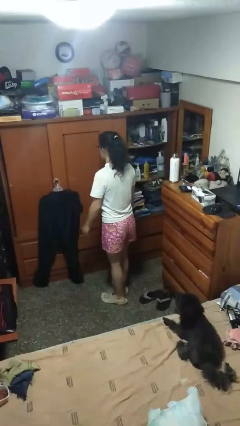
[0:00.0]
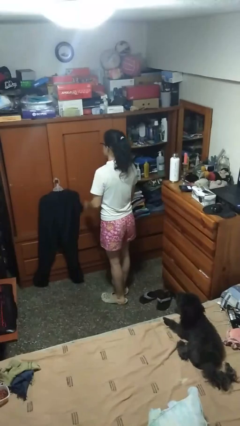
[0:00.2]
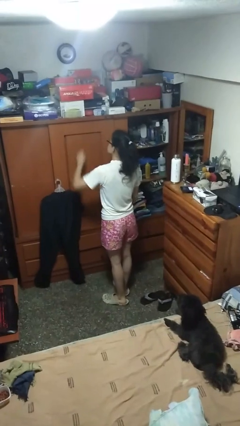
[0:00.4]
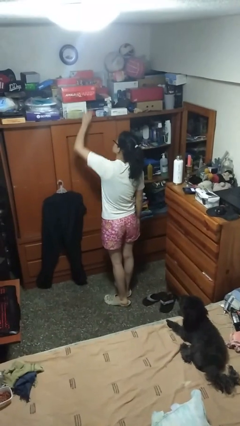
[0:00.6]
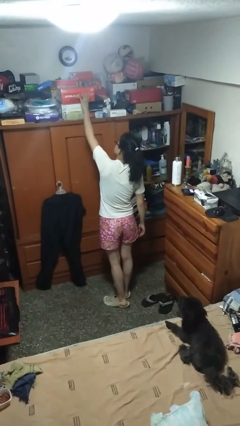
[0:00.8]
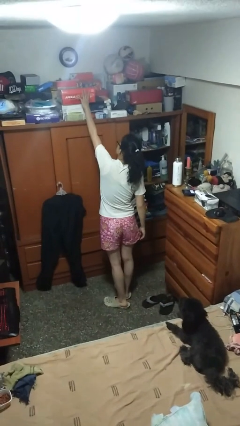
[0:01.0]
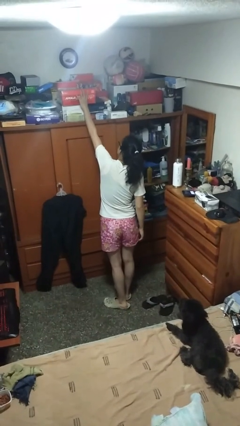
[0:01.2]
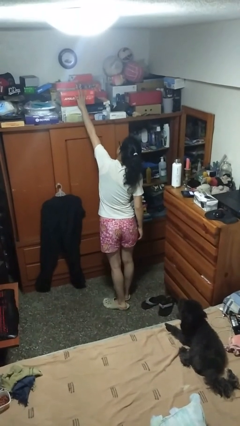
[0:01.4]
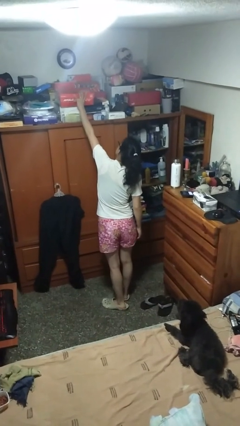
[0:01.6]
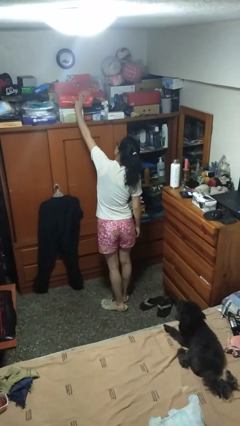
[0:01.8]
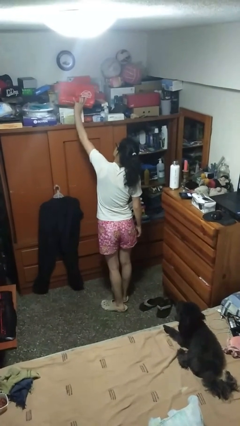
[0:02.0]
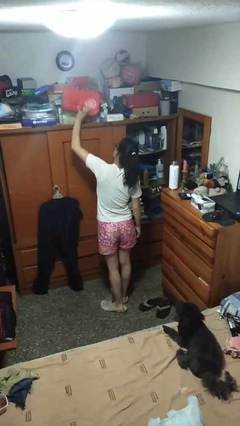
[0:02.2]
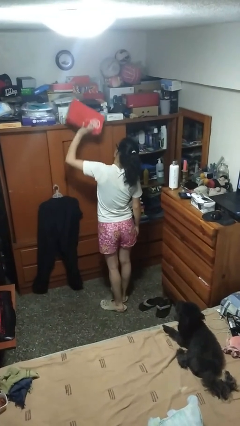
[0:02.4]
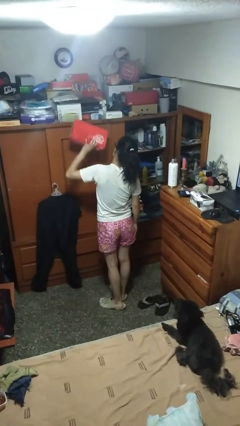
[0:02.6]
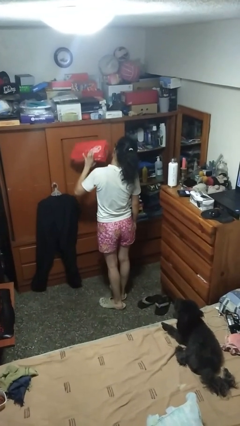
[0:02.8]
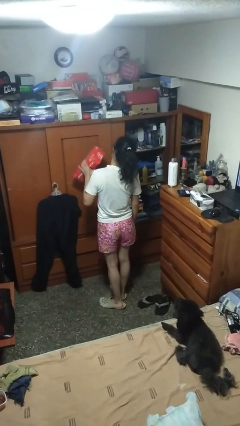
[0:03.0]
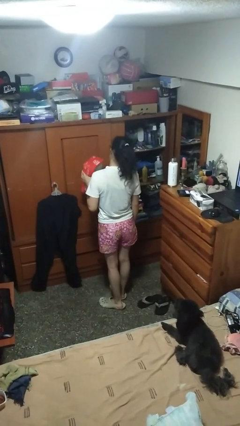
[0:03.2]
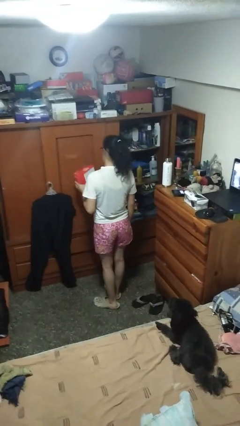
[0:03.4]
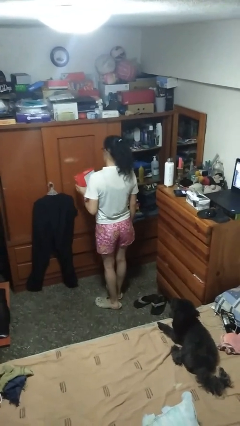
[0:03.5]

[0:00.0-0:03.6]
person picks up object from shelf

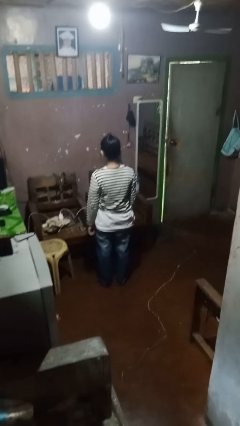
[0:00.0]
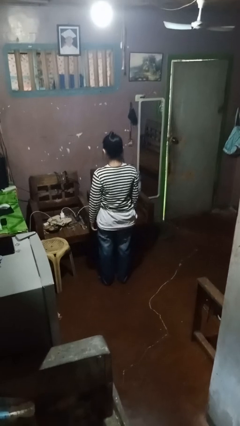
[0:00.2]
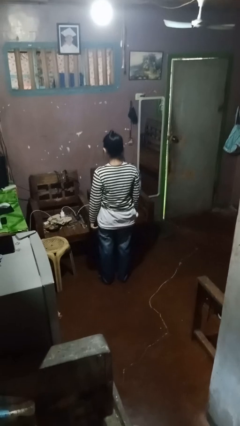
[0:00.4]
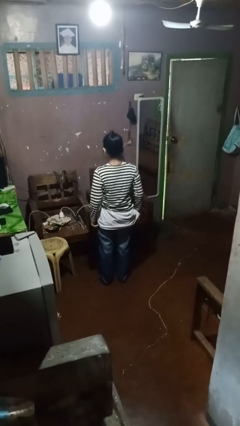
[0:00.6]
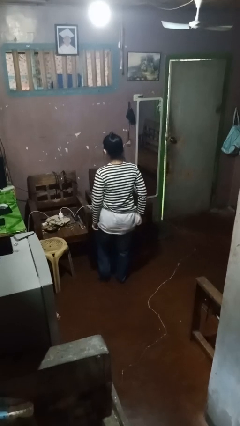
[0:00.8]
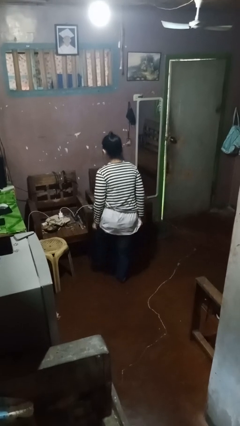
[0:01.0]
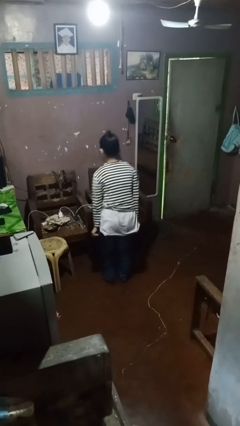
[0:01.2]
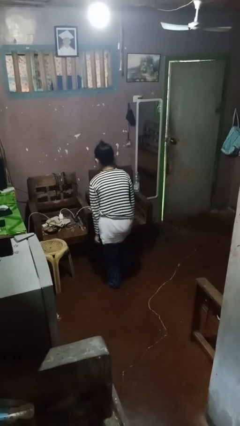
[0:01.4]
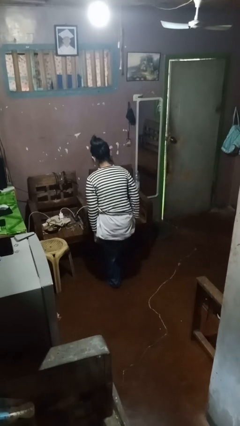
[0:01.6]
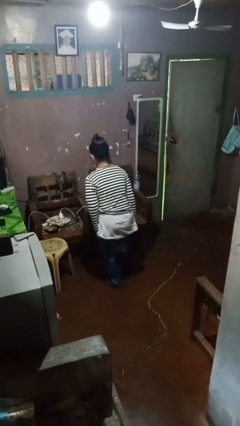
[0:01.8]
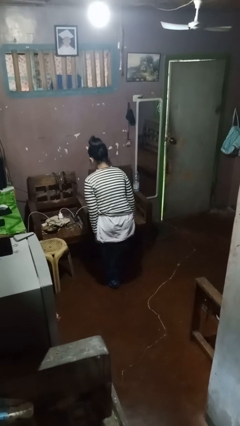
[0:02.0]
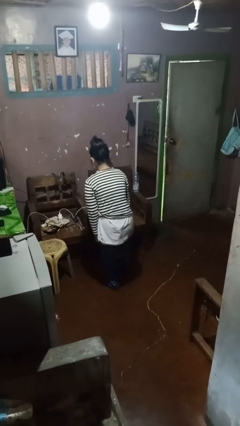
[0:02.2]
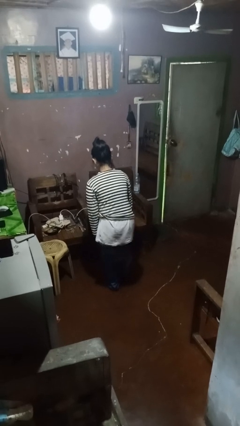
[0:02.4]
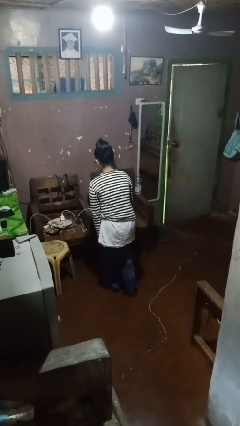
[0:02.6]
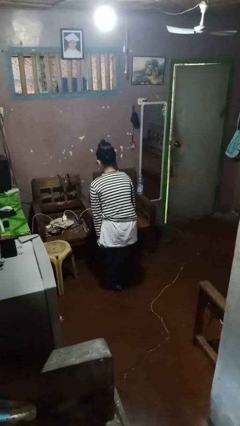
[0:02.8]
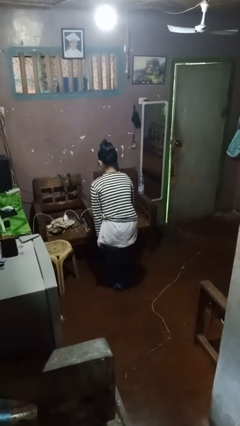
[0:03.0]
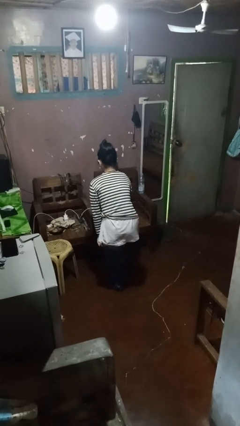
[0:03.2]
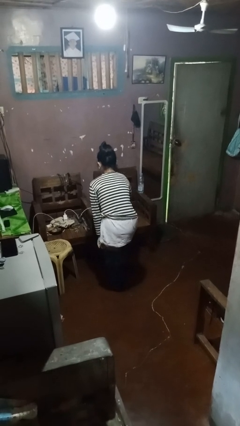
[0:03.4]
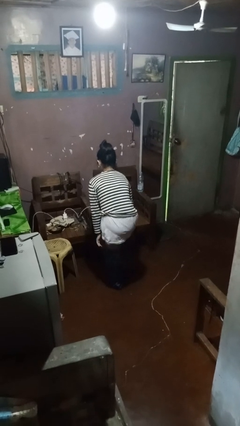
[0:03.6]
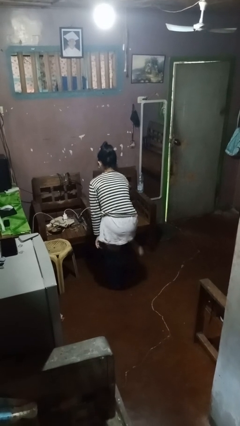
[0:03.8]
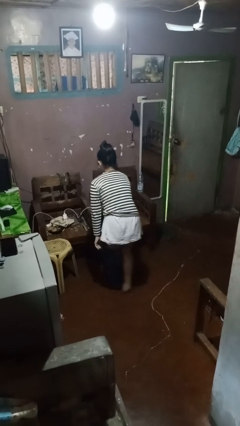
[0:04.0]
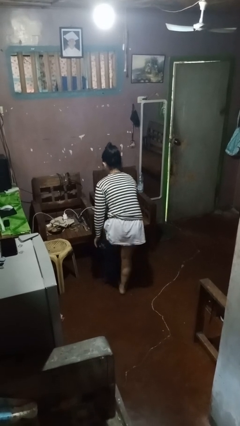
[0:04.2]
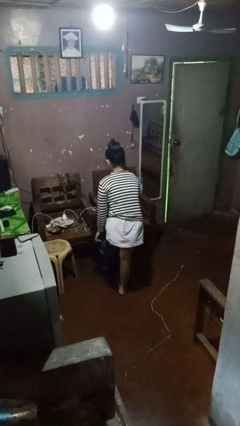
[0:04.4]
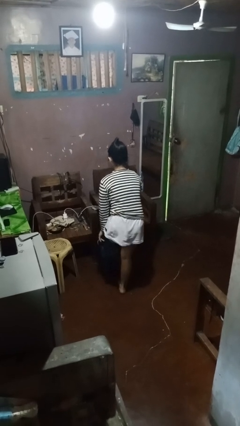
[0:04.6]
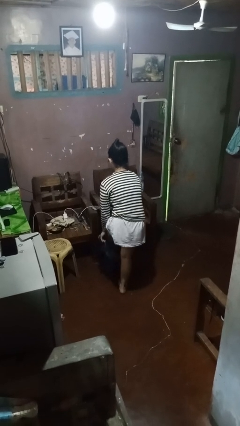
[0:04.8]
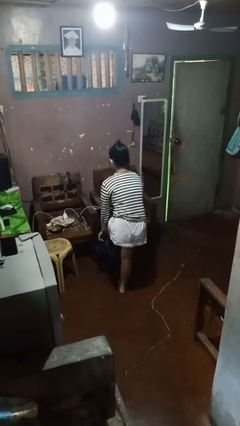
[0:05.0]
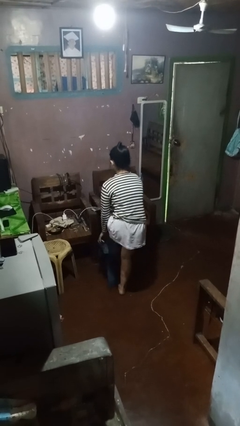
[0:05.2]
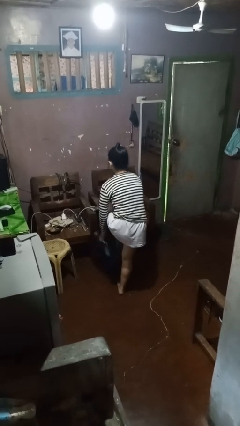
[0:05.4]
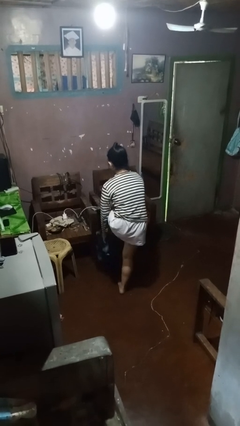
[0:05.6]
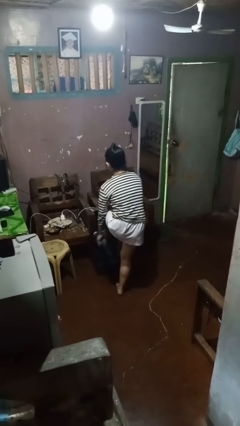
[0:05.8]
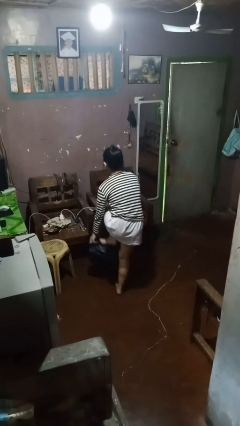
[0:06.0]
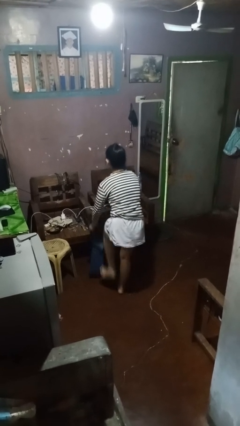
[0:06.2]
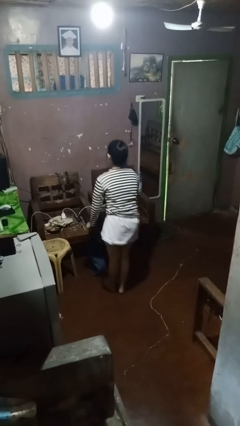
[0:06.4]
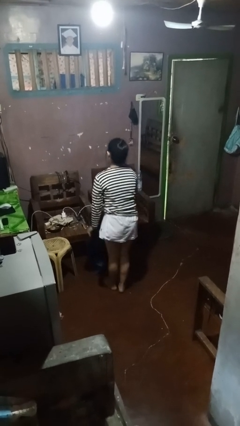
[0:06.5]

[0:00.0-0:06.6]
person takes off pants

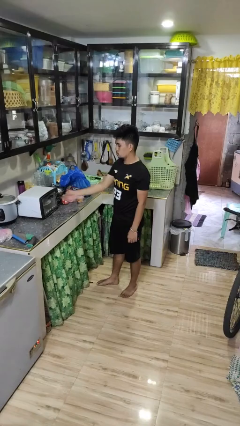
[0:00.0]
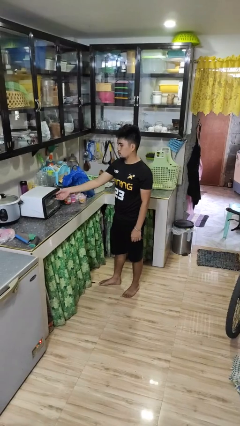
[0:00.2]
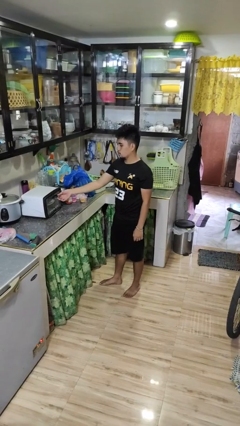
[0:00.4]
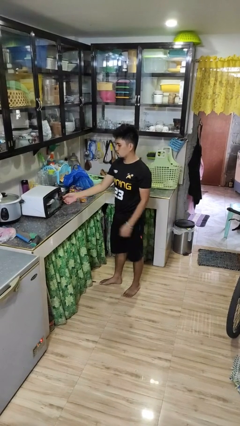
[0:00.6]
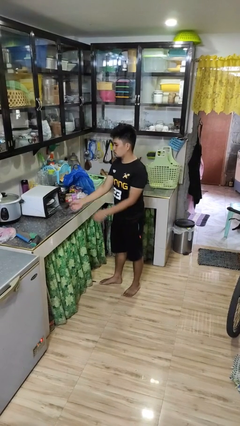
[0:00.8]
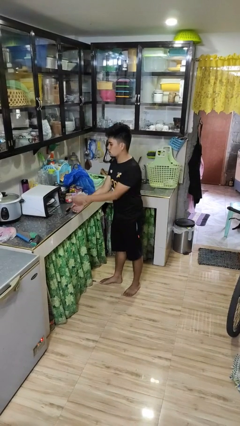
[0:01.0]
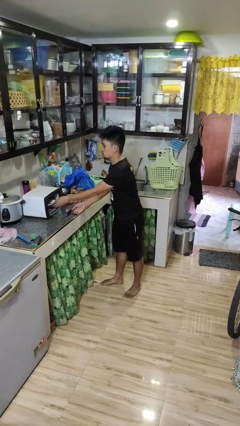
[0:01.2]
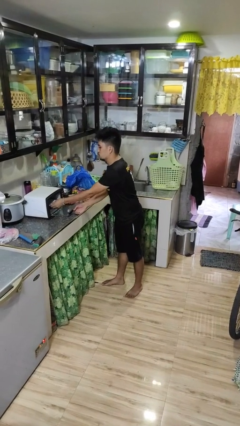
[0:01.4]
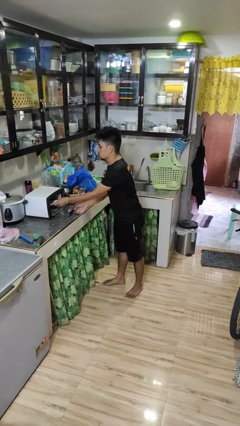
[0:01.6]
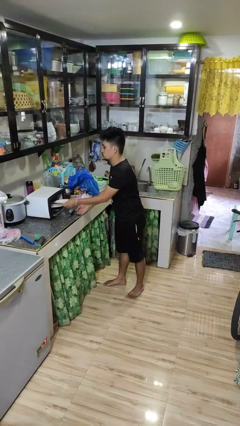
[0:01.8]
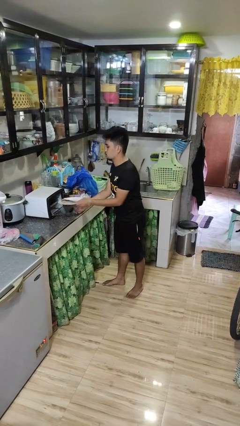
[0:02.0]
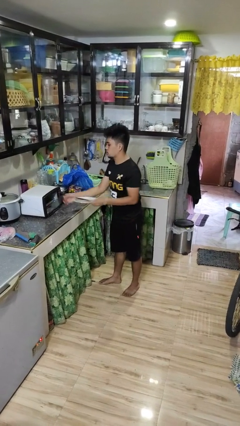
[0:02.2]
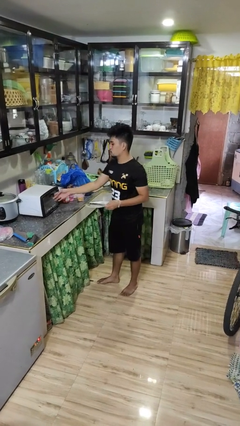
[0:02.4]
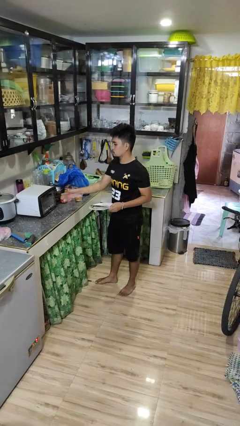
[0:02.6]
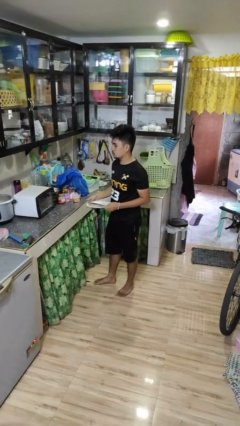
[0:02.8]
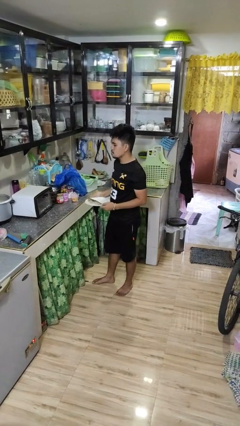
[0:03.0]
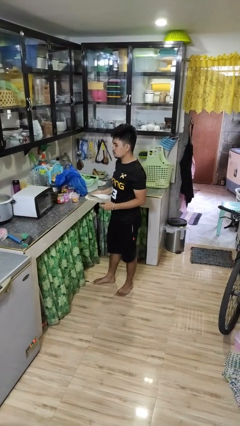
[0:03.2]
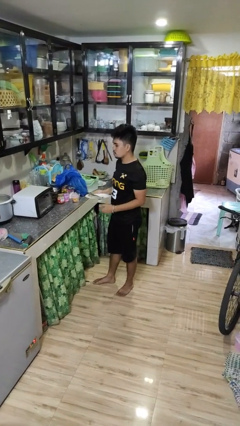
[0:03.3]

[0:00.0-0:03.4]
person takes object from microwave

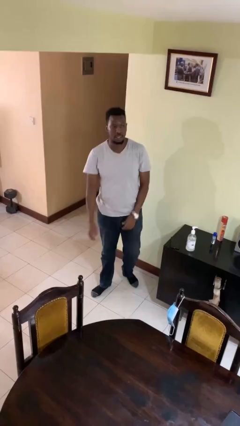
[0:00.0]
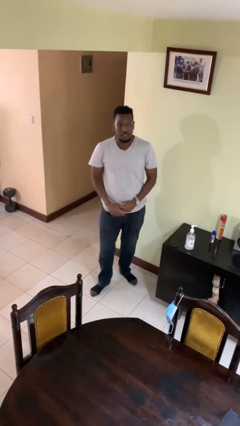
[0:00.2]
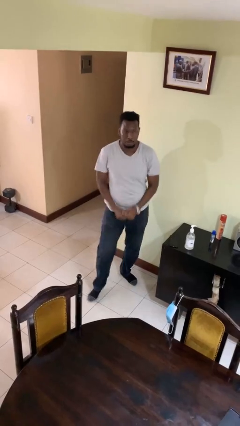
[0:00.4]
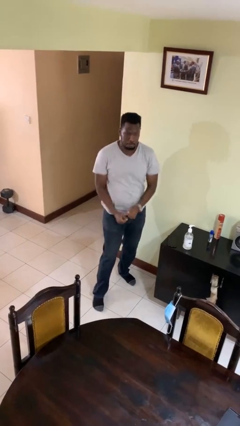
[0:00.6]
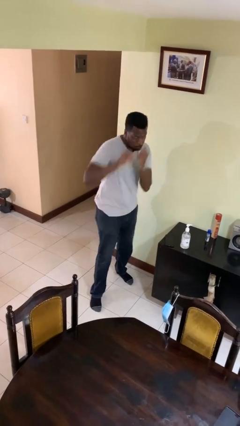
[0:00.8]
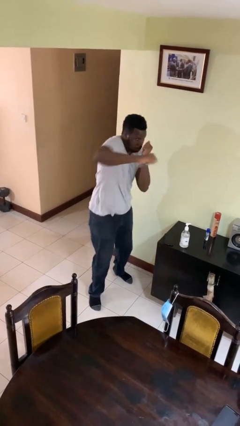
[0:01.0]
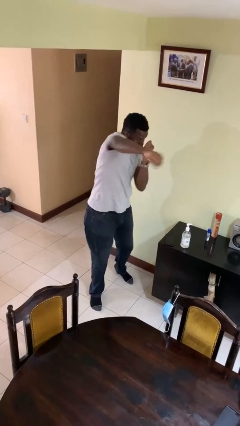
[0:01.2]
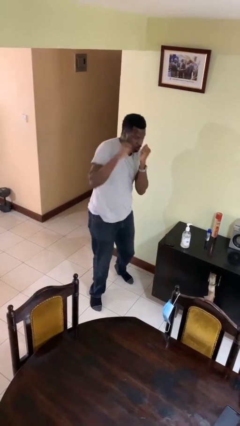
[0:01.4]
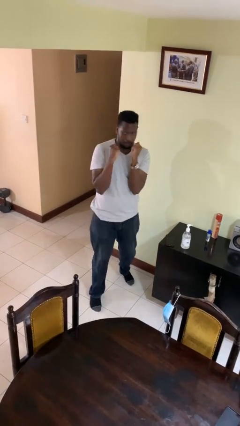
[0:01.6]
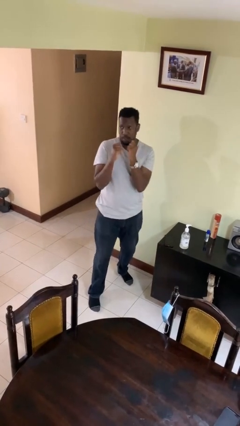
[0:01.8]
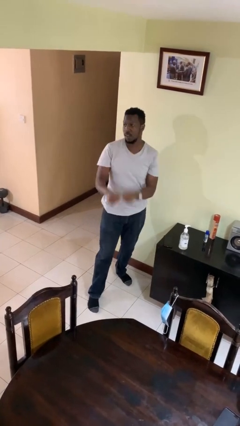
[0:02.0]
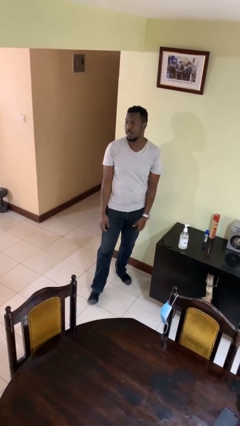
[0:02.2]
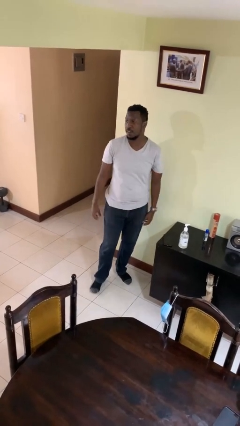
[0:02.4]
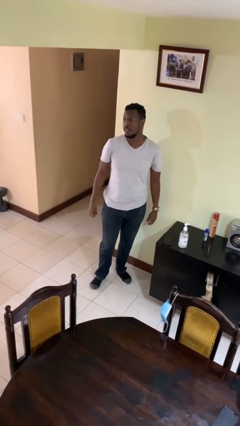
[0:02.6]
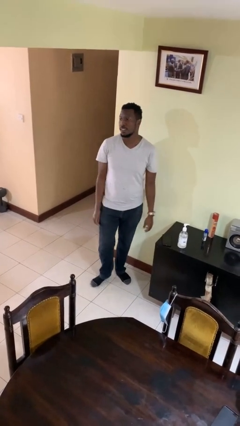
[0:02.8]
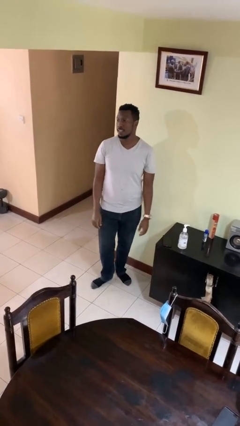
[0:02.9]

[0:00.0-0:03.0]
person punches

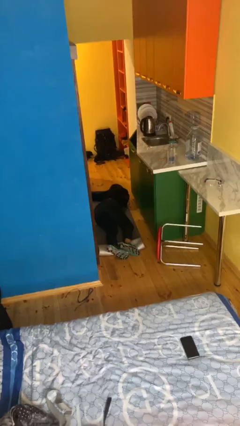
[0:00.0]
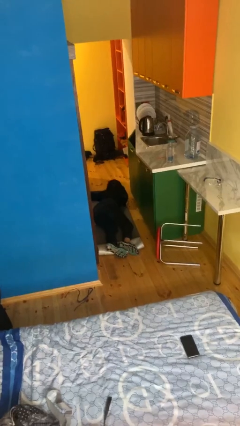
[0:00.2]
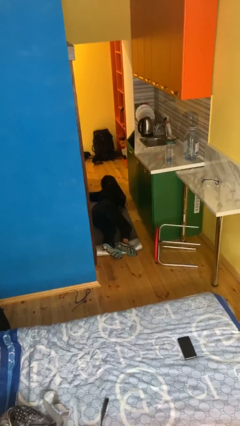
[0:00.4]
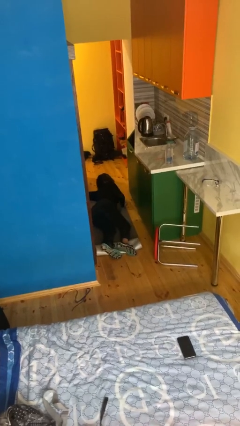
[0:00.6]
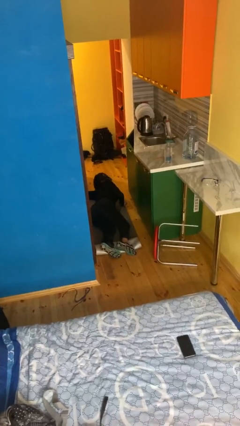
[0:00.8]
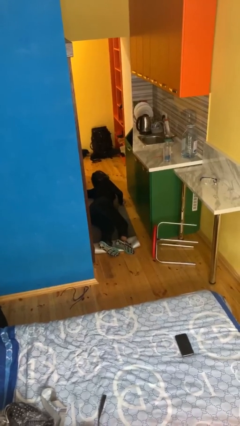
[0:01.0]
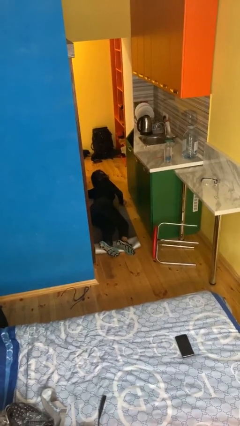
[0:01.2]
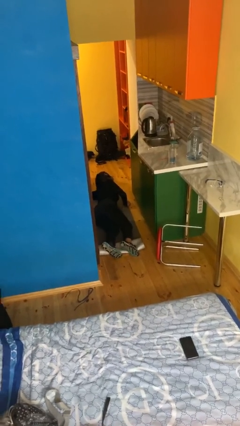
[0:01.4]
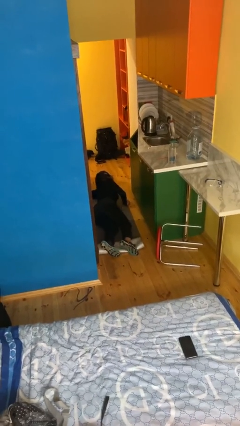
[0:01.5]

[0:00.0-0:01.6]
person lies down on floor
